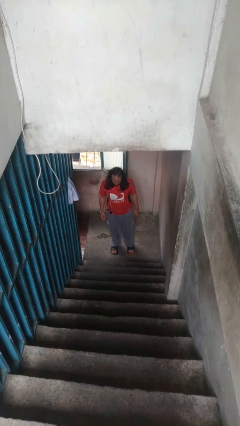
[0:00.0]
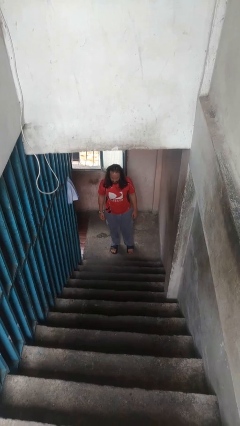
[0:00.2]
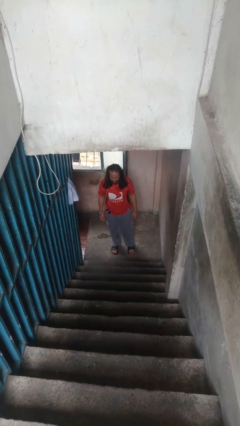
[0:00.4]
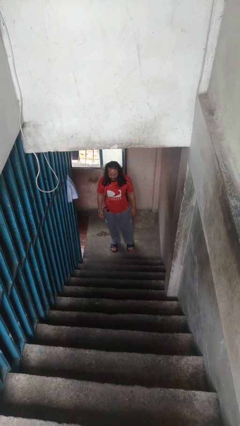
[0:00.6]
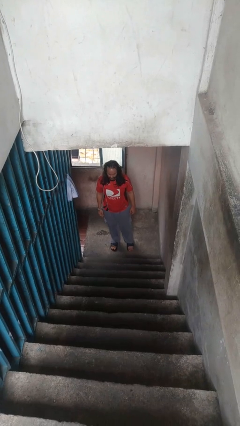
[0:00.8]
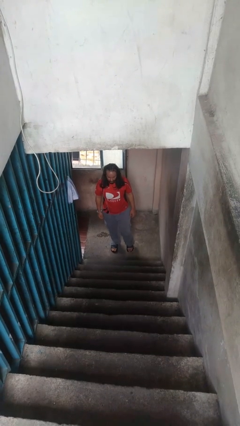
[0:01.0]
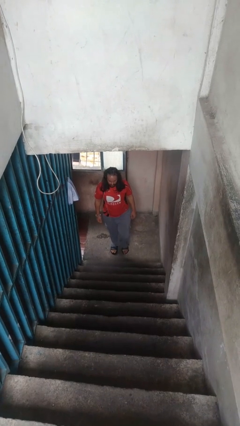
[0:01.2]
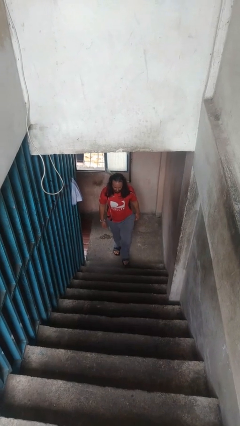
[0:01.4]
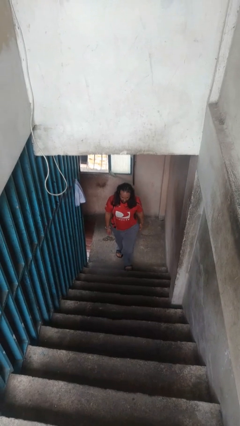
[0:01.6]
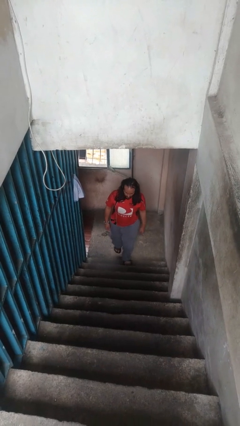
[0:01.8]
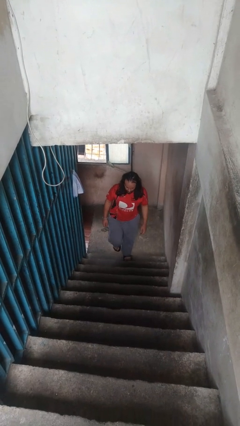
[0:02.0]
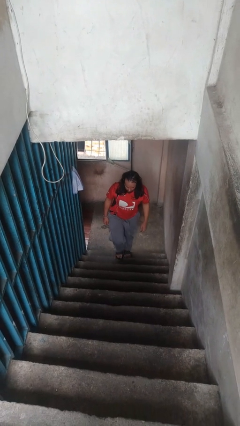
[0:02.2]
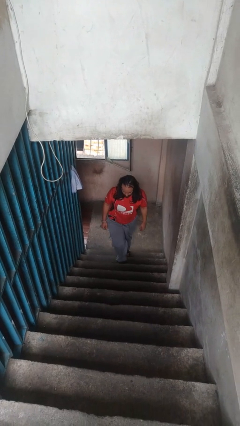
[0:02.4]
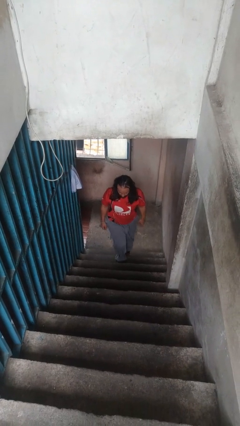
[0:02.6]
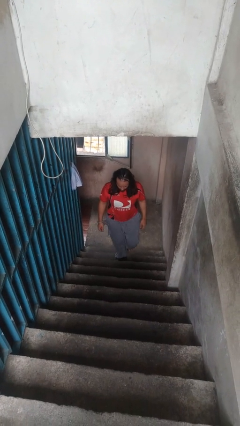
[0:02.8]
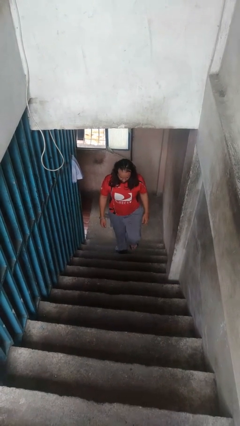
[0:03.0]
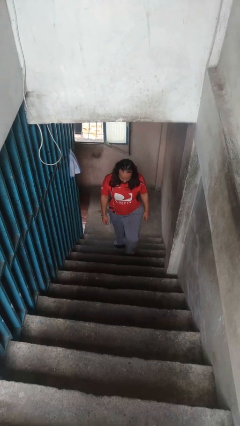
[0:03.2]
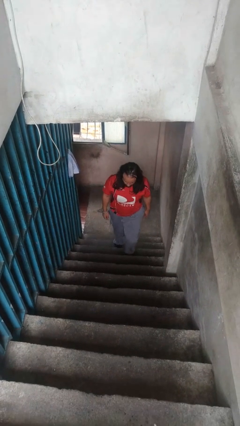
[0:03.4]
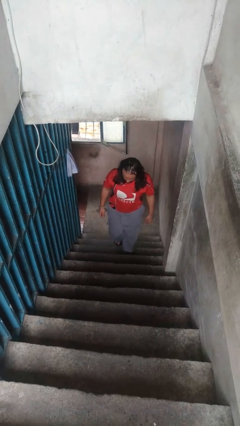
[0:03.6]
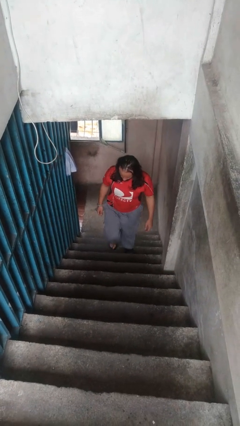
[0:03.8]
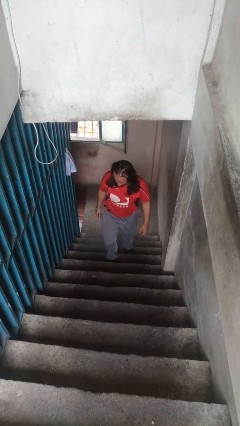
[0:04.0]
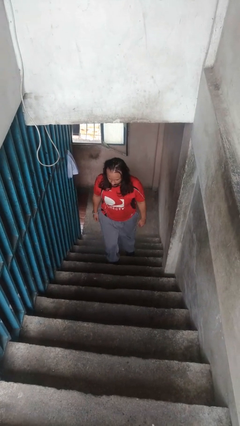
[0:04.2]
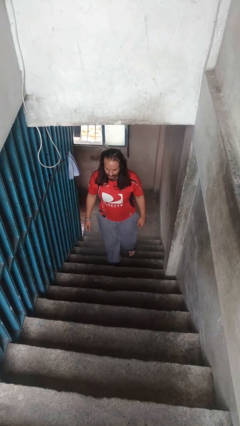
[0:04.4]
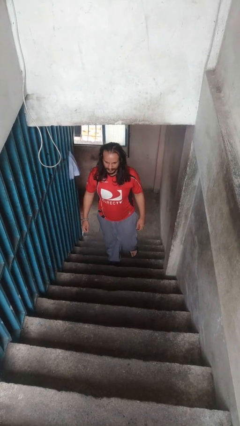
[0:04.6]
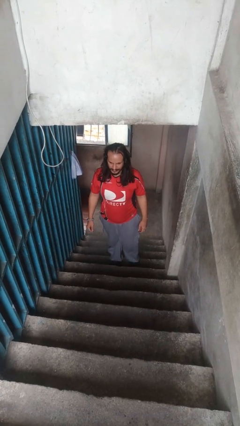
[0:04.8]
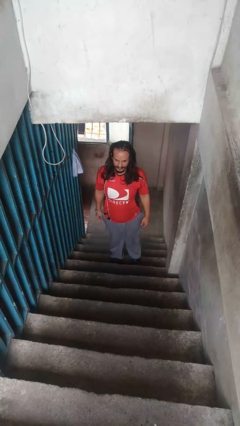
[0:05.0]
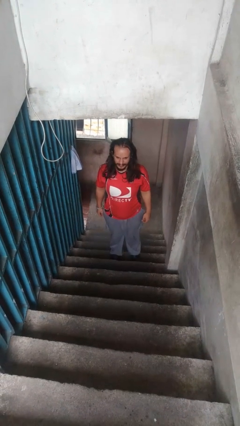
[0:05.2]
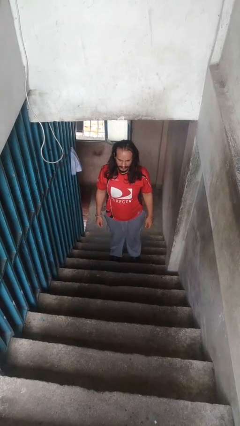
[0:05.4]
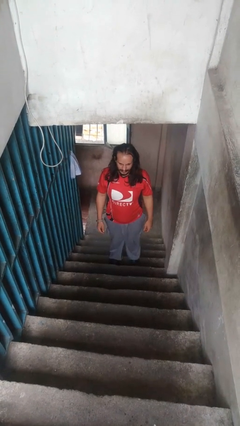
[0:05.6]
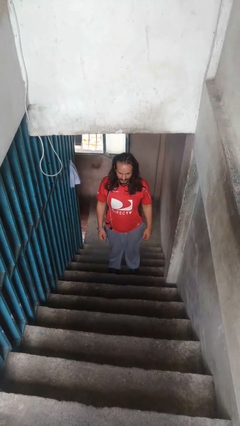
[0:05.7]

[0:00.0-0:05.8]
person climbs up stairs

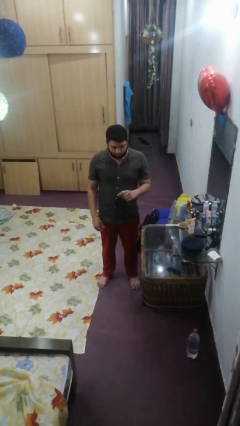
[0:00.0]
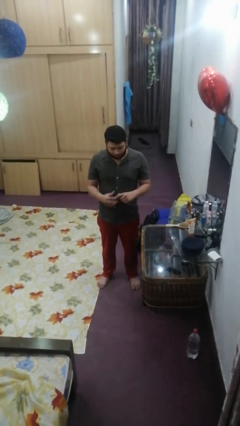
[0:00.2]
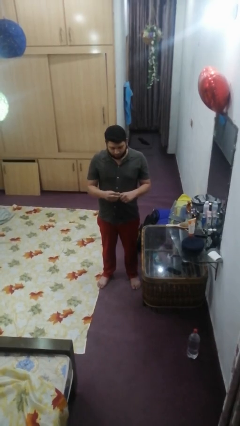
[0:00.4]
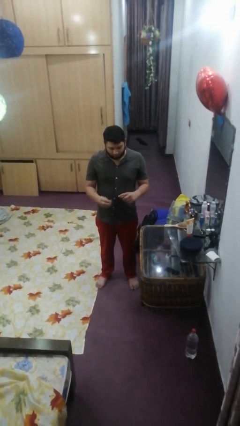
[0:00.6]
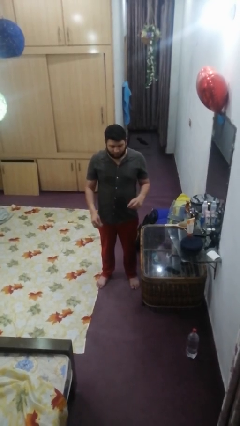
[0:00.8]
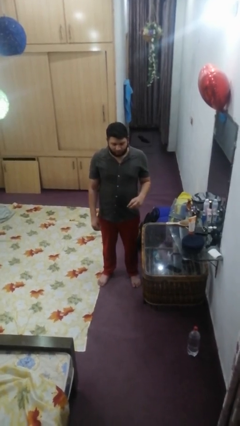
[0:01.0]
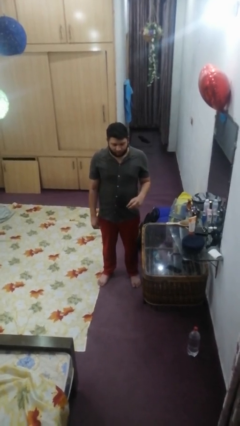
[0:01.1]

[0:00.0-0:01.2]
person takes off ring

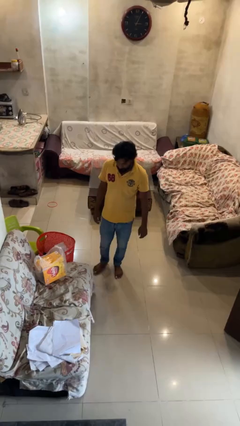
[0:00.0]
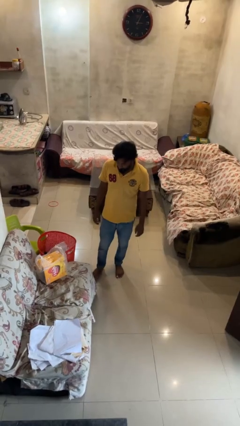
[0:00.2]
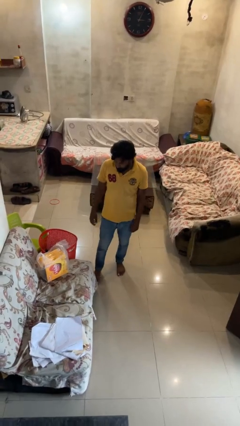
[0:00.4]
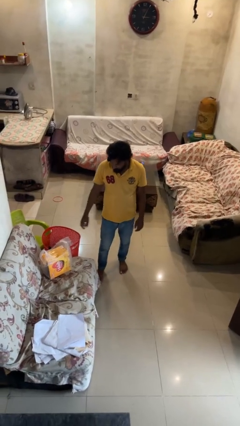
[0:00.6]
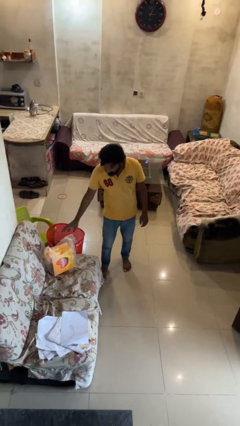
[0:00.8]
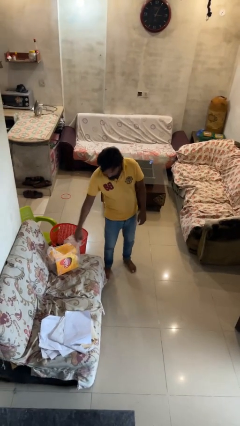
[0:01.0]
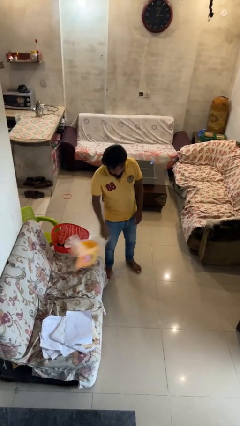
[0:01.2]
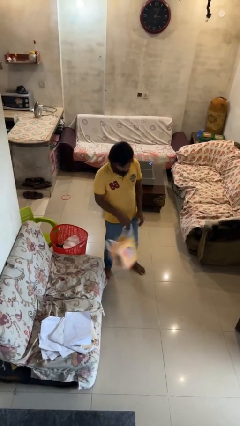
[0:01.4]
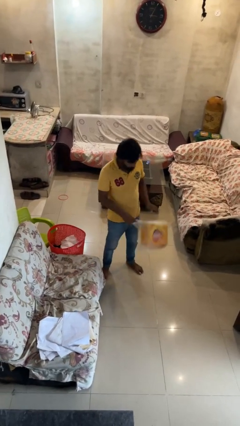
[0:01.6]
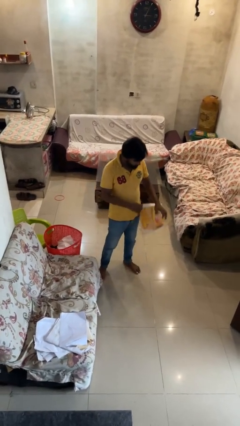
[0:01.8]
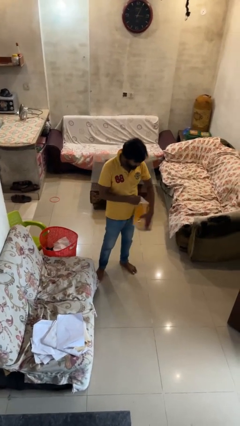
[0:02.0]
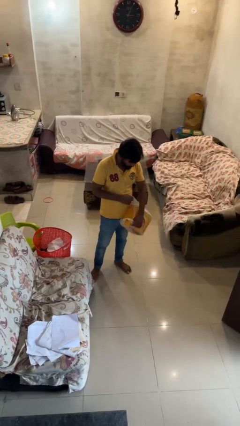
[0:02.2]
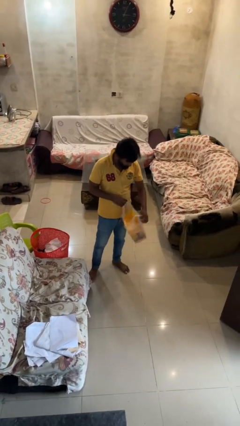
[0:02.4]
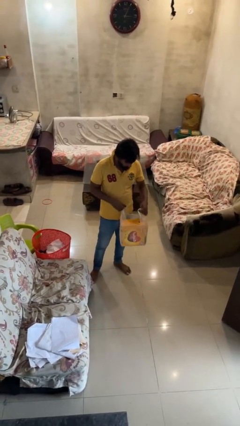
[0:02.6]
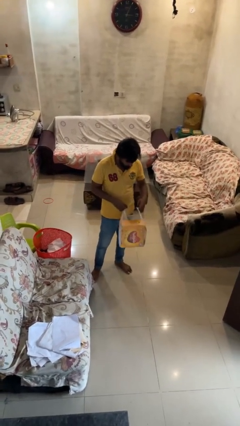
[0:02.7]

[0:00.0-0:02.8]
person picks up object from couch

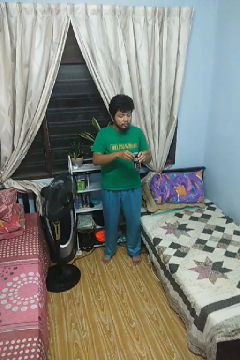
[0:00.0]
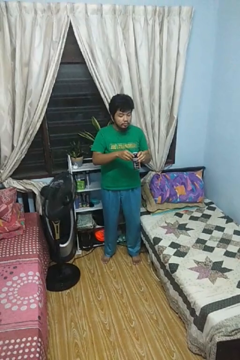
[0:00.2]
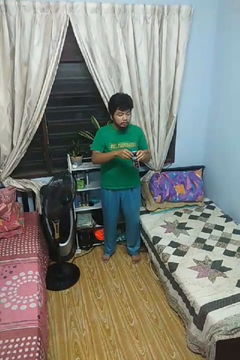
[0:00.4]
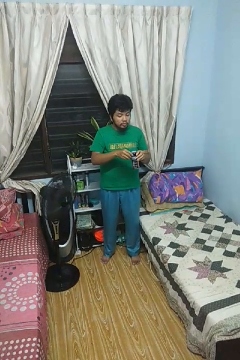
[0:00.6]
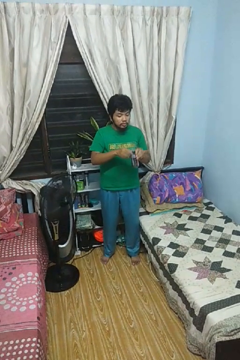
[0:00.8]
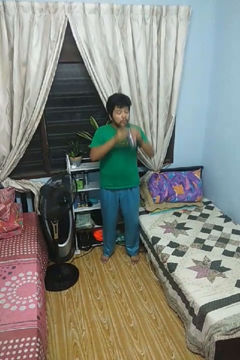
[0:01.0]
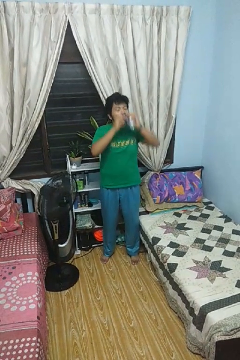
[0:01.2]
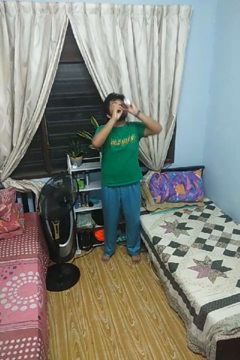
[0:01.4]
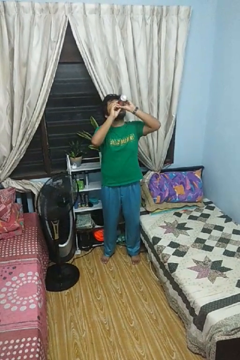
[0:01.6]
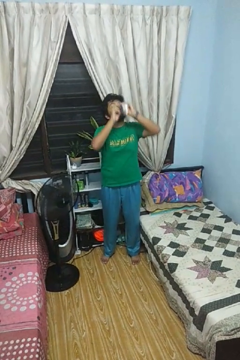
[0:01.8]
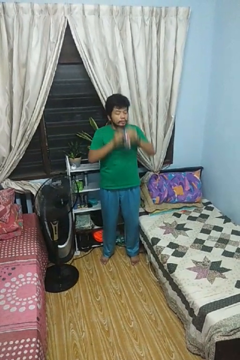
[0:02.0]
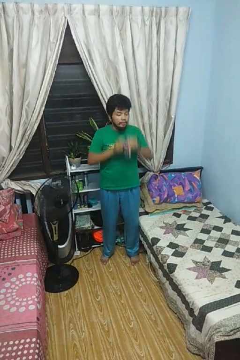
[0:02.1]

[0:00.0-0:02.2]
person drinks from beverage can

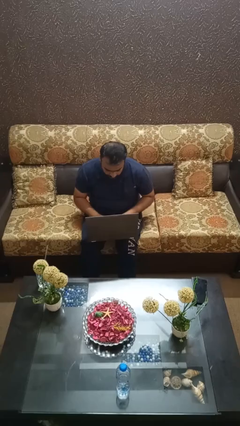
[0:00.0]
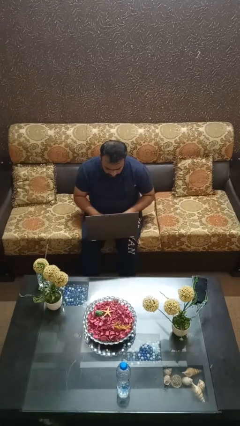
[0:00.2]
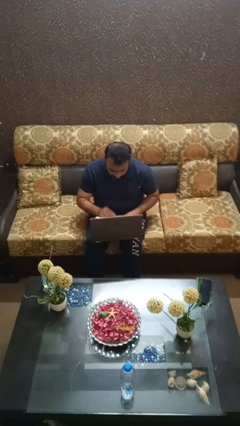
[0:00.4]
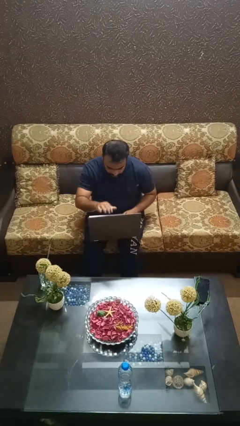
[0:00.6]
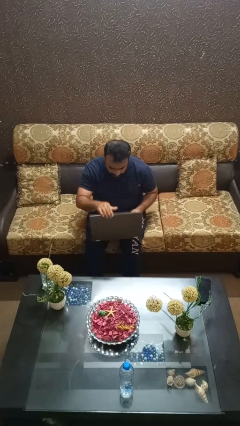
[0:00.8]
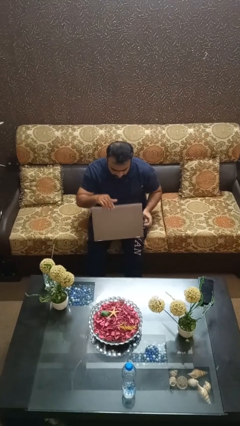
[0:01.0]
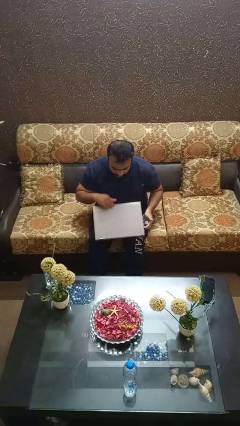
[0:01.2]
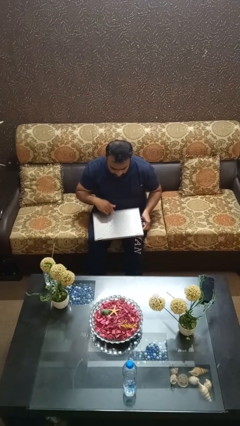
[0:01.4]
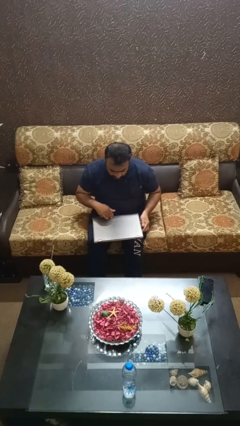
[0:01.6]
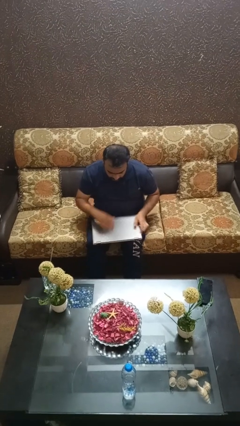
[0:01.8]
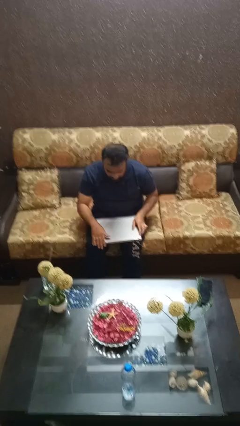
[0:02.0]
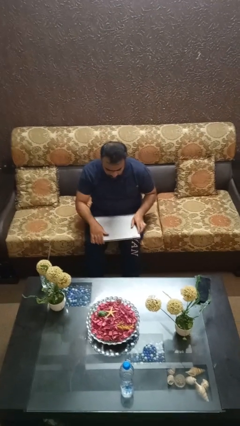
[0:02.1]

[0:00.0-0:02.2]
person closes laptop

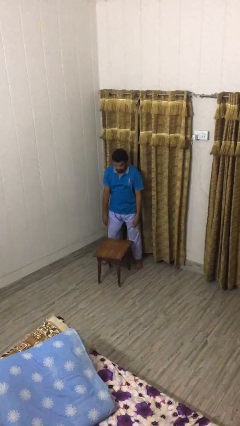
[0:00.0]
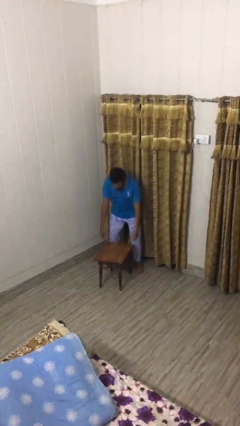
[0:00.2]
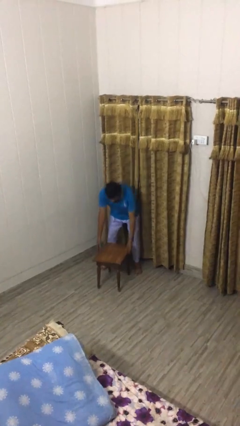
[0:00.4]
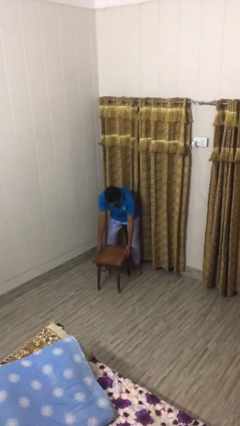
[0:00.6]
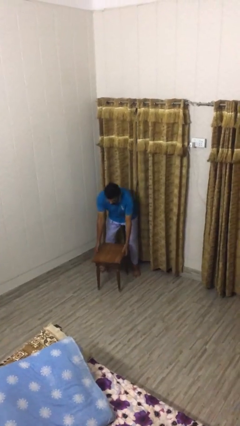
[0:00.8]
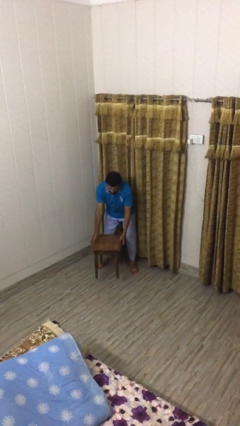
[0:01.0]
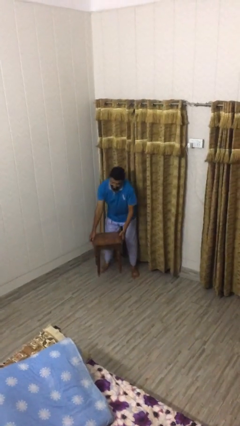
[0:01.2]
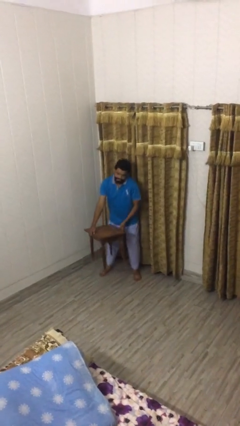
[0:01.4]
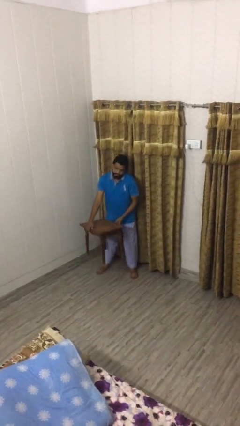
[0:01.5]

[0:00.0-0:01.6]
person picks up object from floor

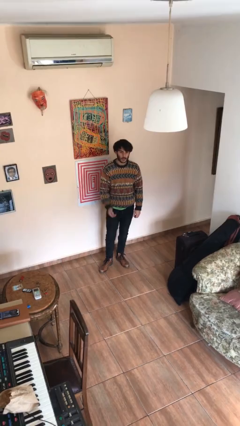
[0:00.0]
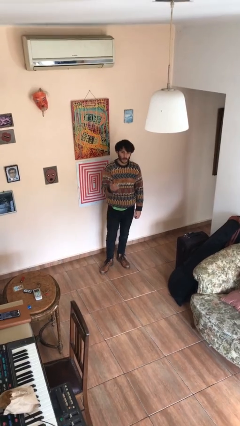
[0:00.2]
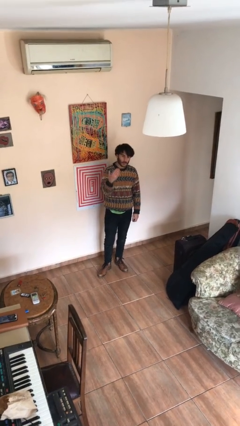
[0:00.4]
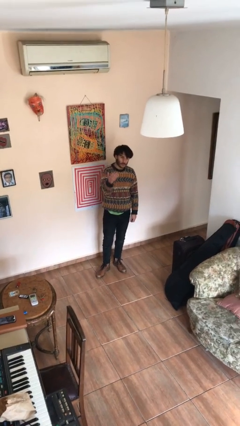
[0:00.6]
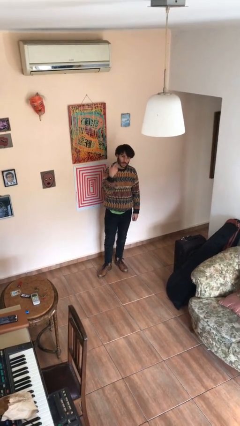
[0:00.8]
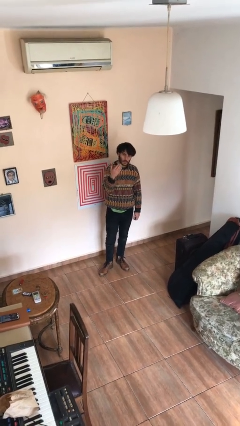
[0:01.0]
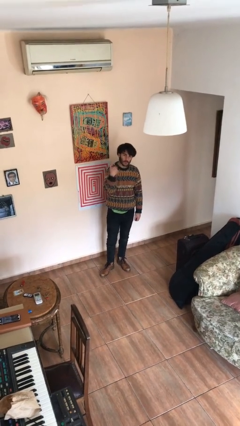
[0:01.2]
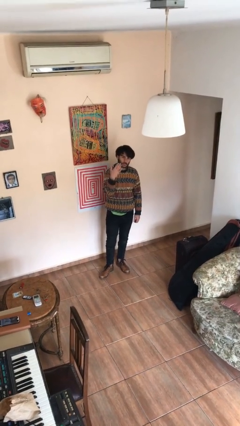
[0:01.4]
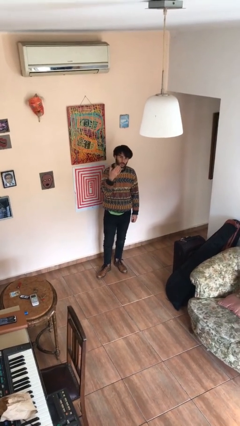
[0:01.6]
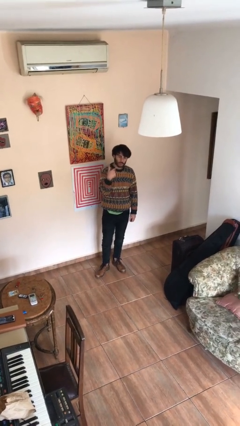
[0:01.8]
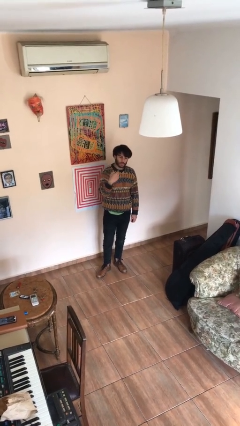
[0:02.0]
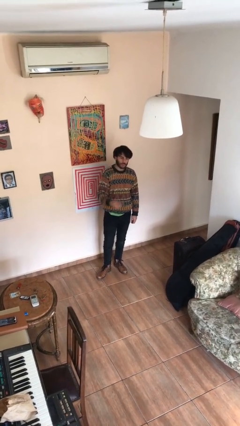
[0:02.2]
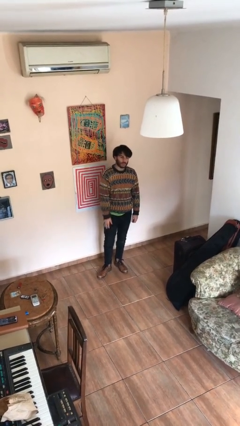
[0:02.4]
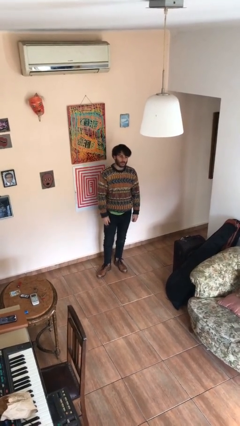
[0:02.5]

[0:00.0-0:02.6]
person gestures come here
